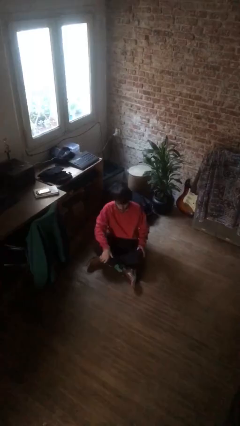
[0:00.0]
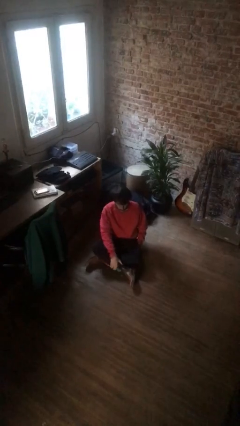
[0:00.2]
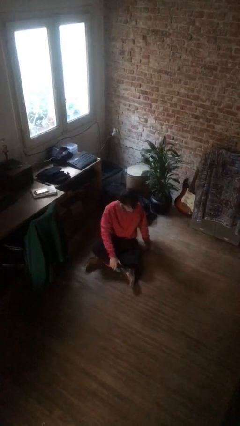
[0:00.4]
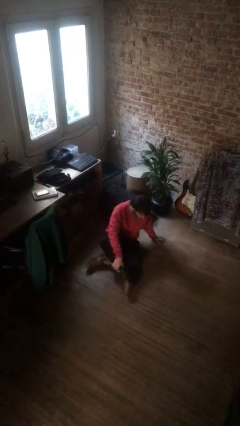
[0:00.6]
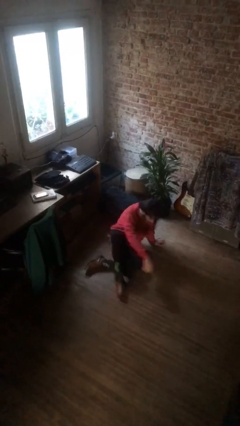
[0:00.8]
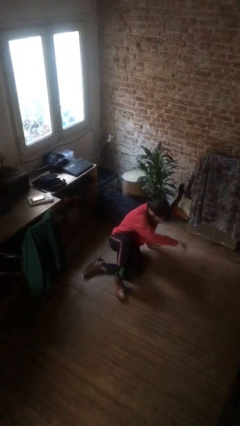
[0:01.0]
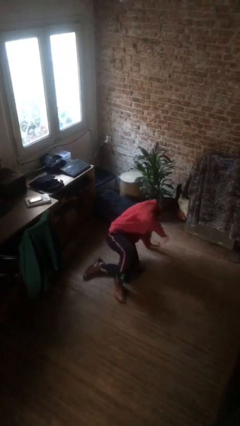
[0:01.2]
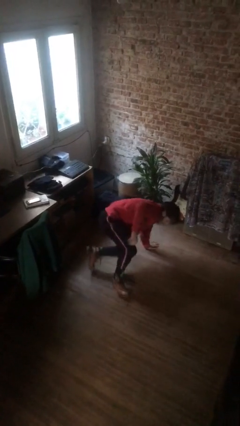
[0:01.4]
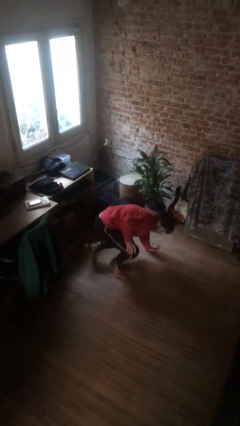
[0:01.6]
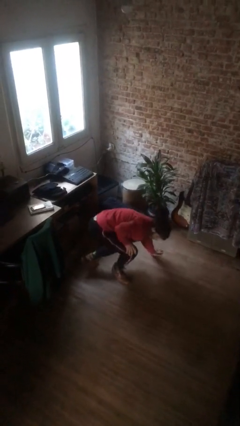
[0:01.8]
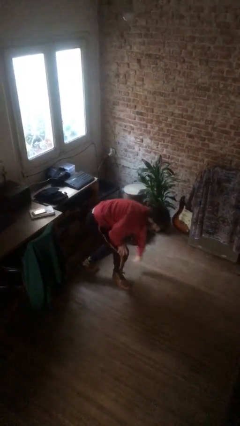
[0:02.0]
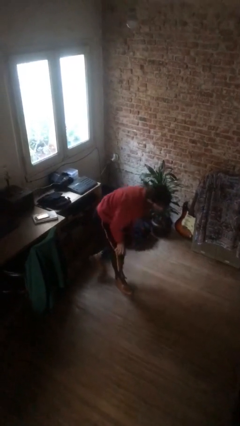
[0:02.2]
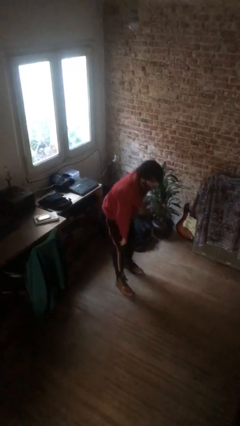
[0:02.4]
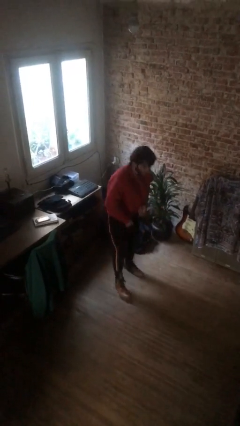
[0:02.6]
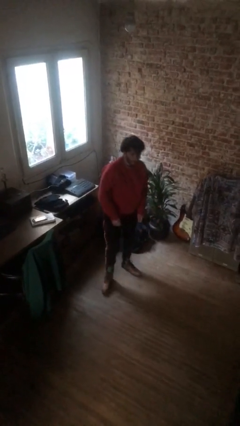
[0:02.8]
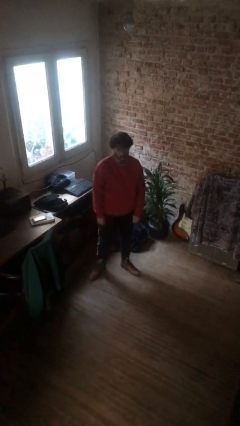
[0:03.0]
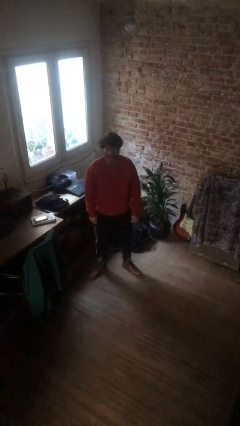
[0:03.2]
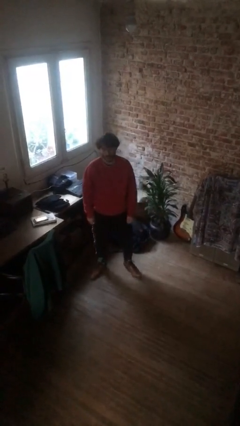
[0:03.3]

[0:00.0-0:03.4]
person stands up from floor

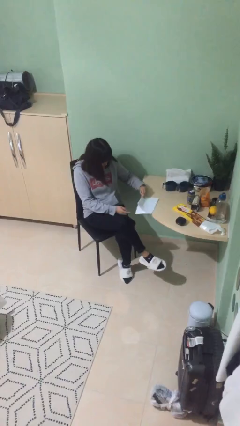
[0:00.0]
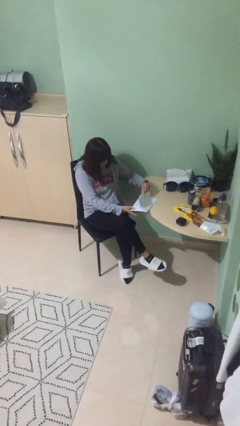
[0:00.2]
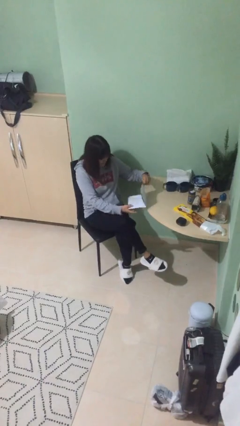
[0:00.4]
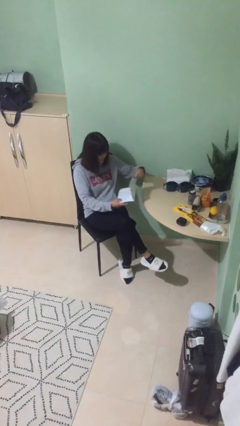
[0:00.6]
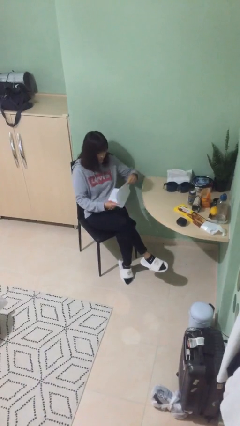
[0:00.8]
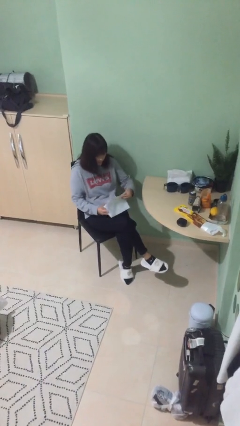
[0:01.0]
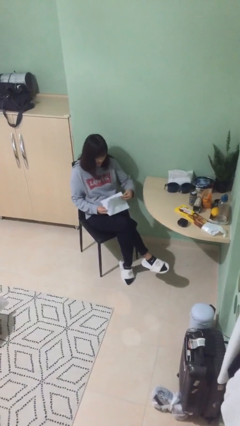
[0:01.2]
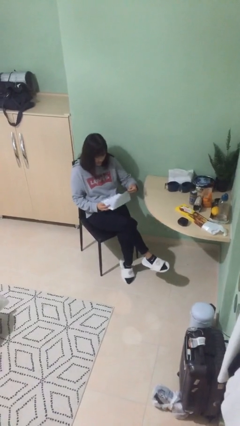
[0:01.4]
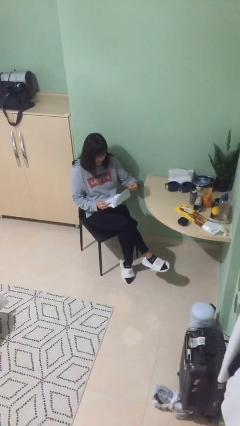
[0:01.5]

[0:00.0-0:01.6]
person picks up object from table

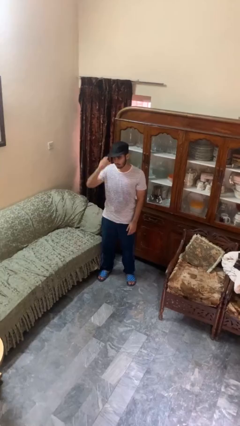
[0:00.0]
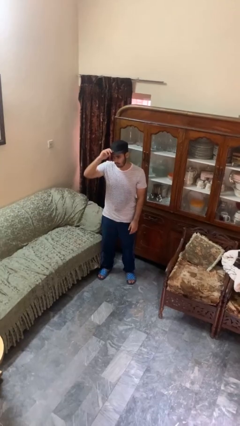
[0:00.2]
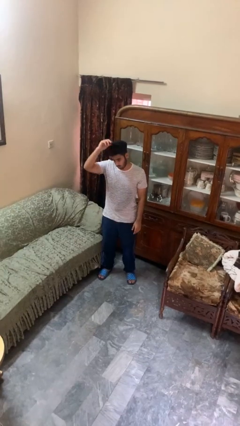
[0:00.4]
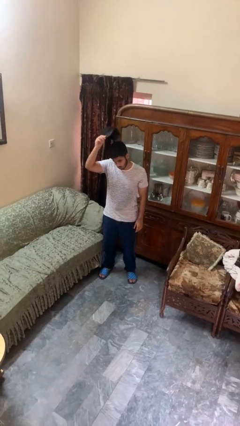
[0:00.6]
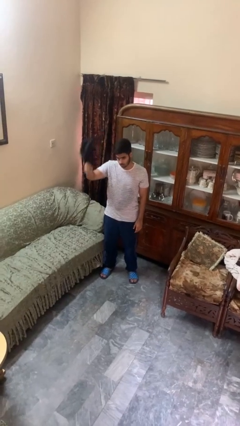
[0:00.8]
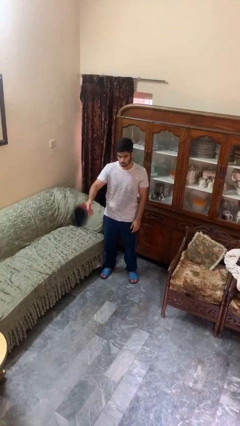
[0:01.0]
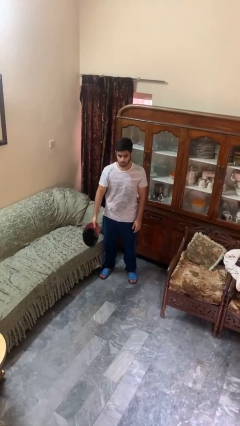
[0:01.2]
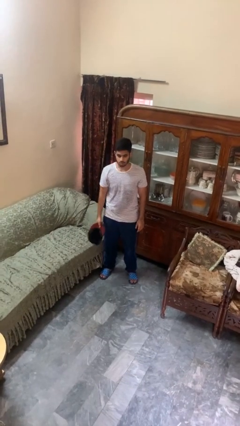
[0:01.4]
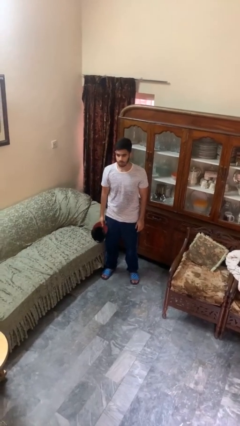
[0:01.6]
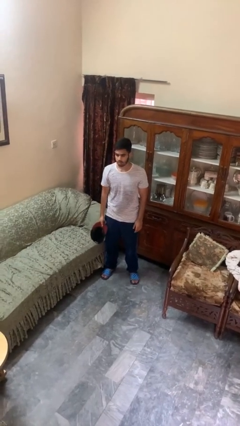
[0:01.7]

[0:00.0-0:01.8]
person takes off hat

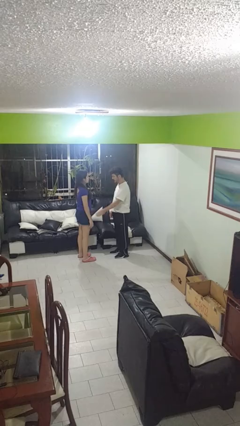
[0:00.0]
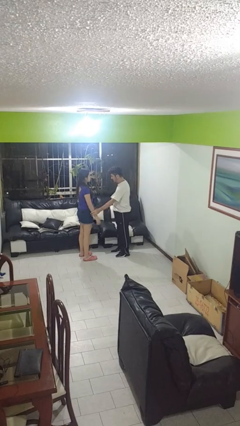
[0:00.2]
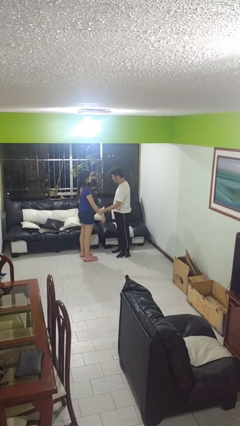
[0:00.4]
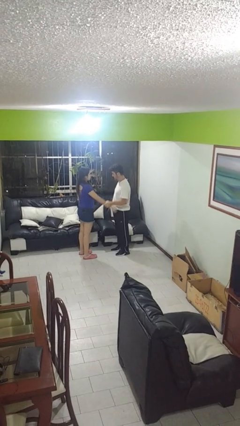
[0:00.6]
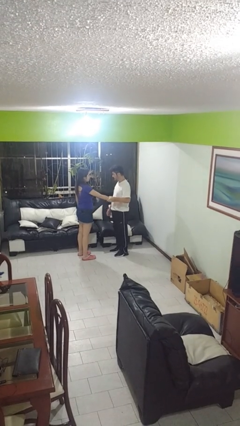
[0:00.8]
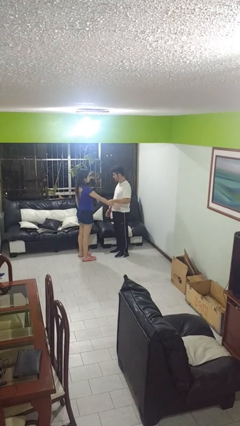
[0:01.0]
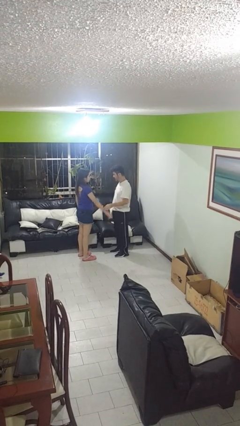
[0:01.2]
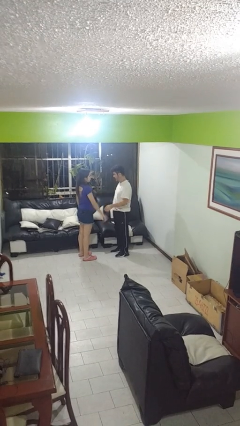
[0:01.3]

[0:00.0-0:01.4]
person grabs person by forearm

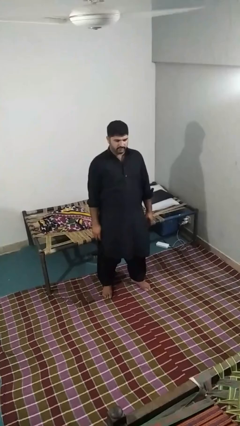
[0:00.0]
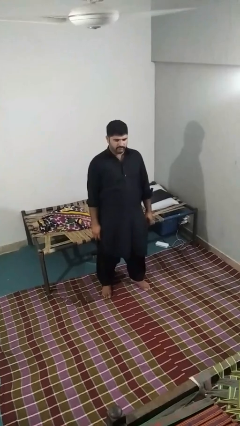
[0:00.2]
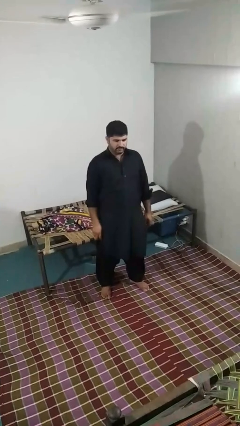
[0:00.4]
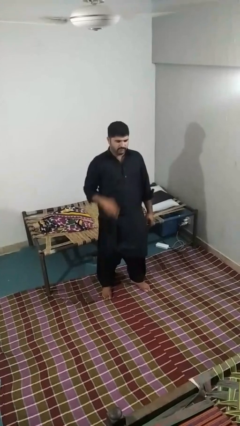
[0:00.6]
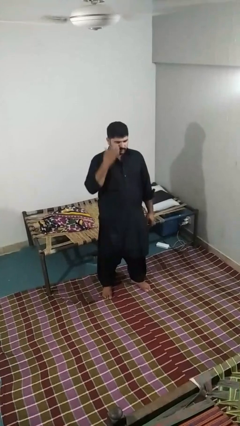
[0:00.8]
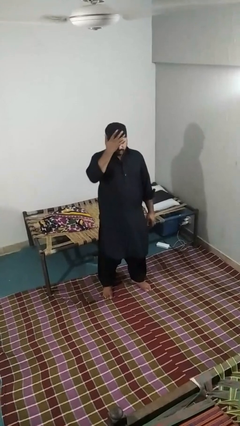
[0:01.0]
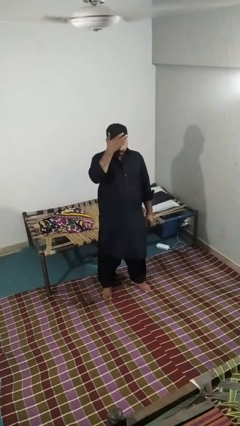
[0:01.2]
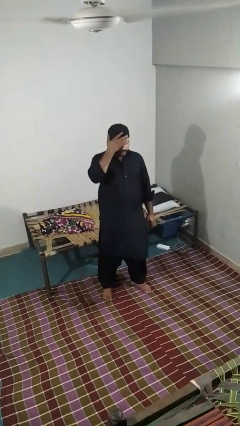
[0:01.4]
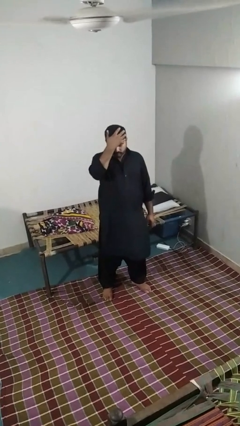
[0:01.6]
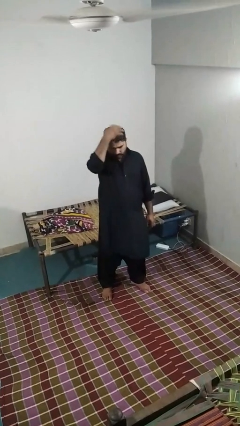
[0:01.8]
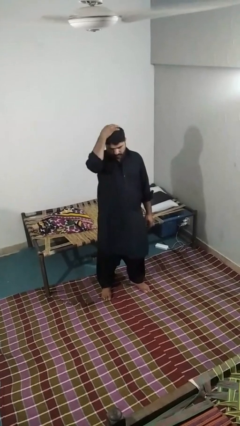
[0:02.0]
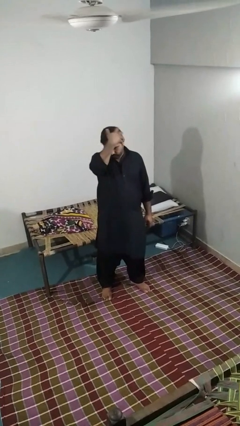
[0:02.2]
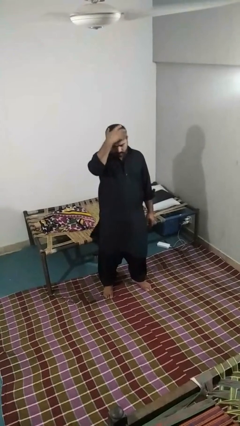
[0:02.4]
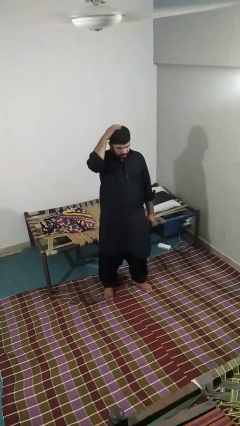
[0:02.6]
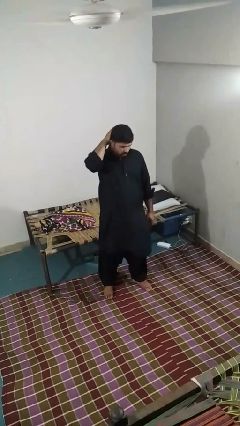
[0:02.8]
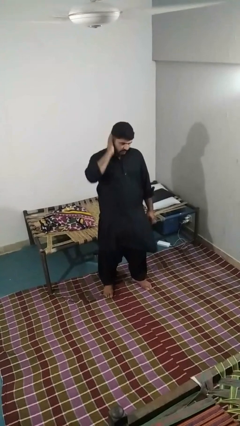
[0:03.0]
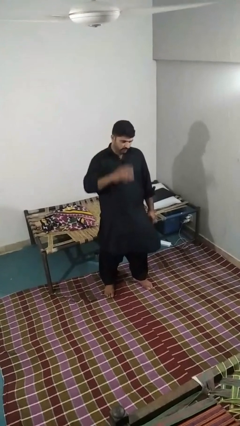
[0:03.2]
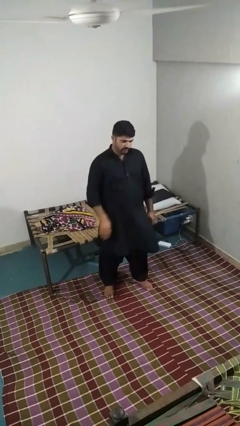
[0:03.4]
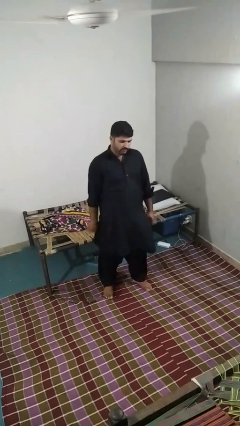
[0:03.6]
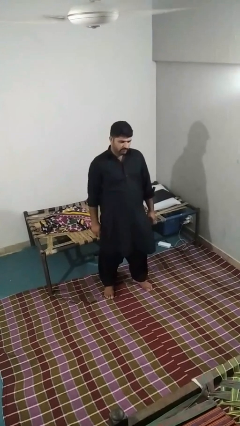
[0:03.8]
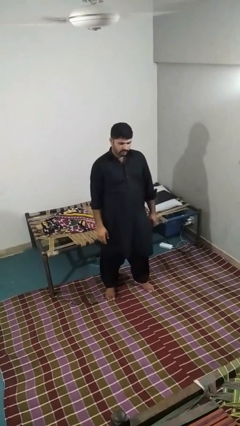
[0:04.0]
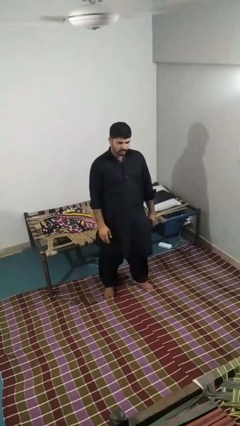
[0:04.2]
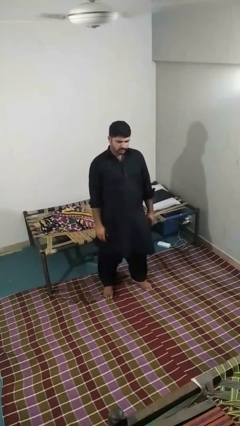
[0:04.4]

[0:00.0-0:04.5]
person scratches face

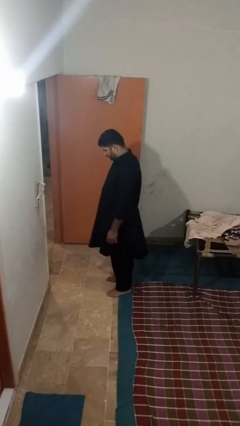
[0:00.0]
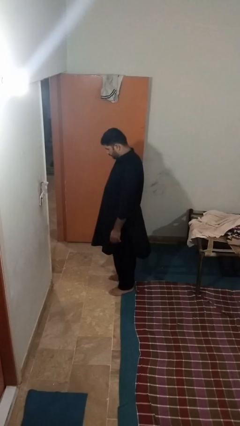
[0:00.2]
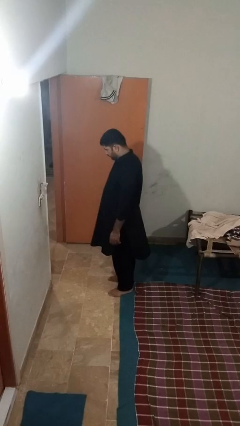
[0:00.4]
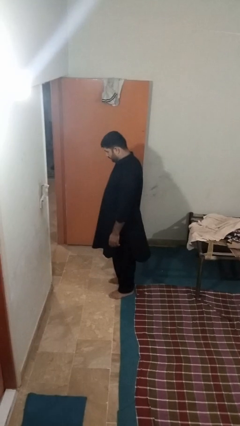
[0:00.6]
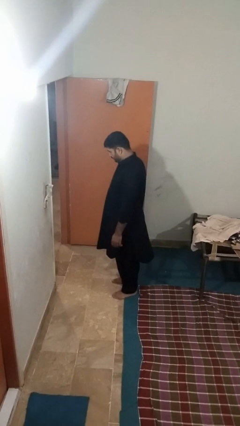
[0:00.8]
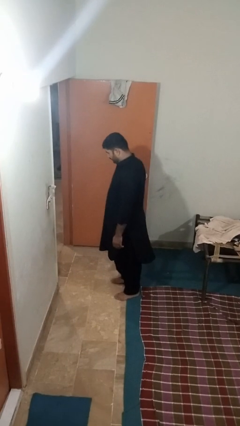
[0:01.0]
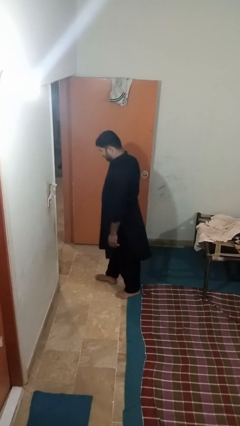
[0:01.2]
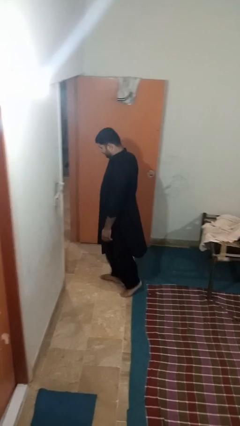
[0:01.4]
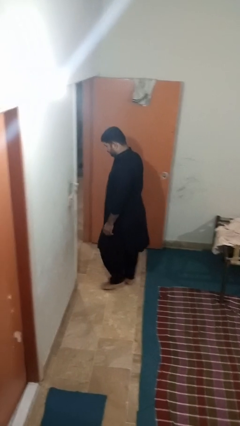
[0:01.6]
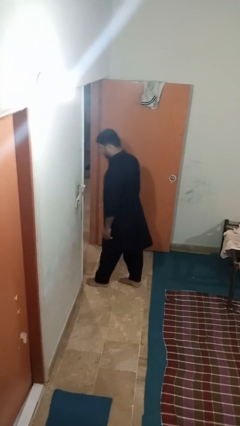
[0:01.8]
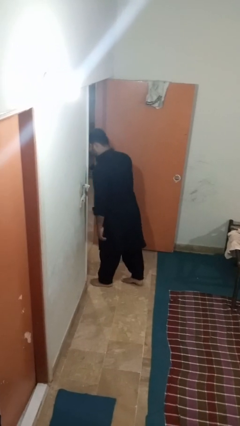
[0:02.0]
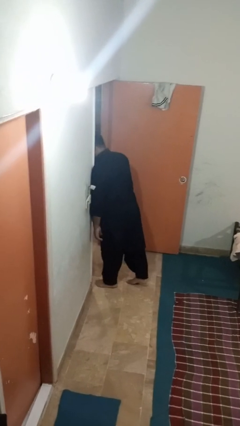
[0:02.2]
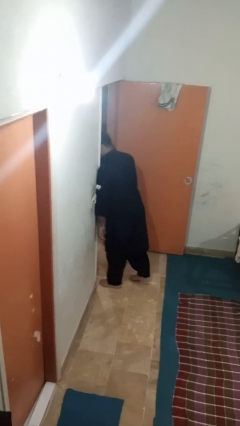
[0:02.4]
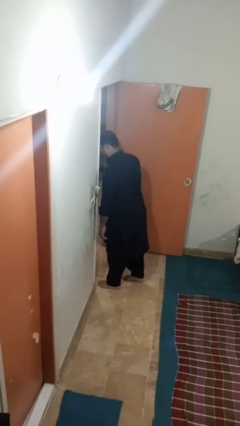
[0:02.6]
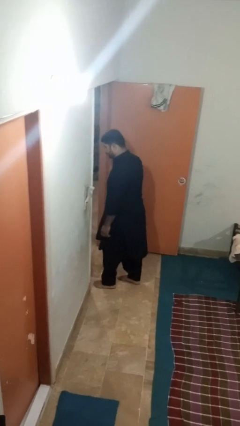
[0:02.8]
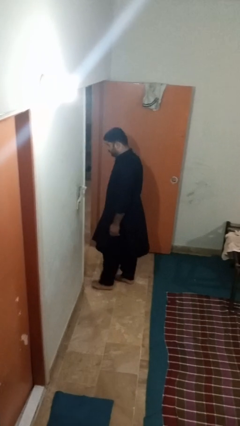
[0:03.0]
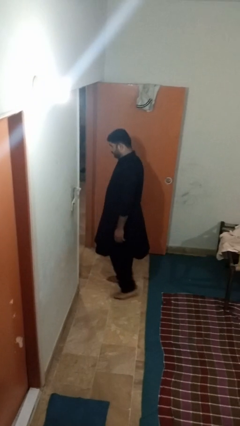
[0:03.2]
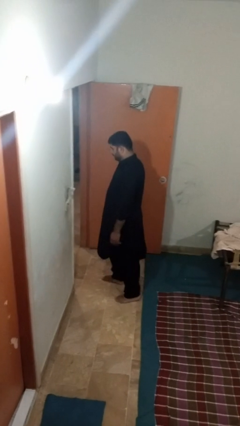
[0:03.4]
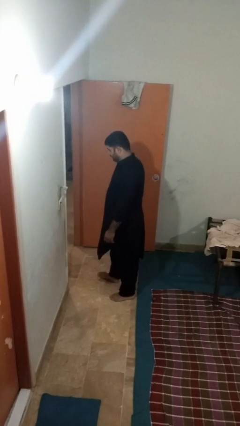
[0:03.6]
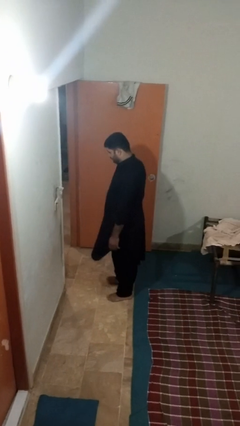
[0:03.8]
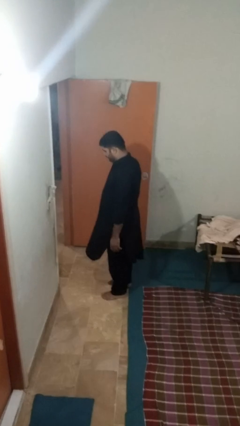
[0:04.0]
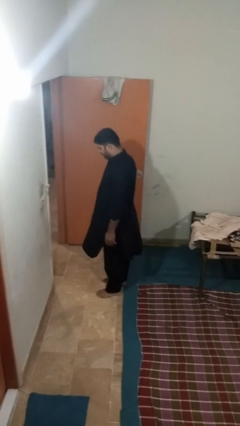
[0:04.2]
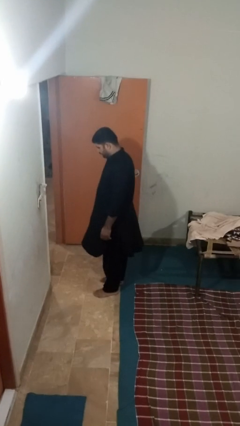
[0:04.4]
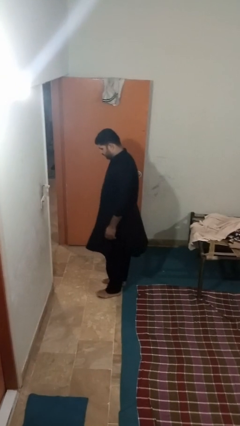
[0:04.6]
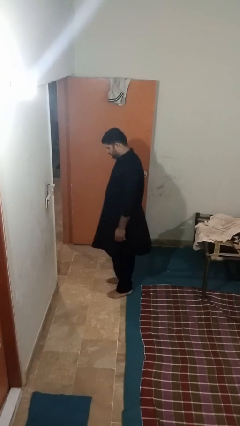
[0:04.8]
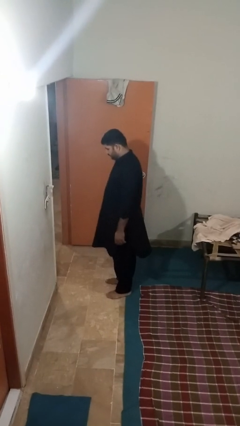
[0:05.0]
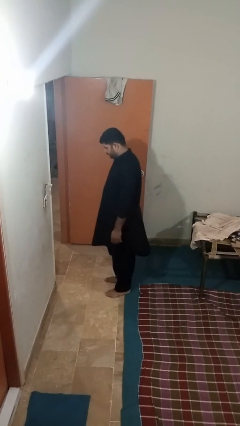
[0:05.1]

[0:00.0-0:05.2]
person bumps into wall
